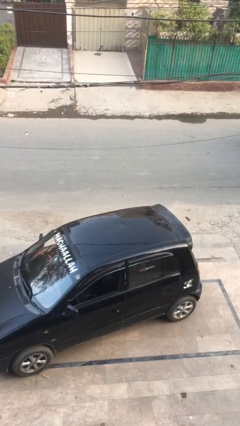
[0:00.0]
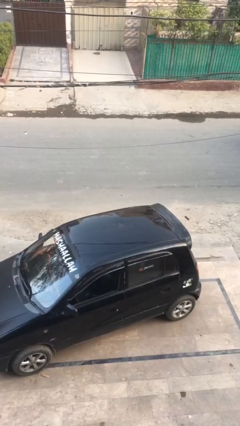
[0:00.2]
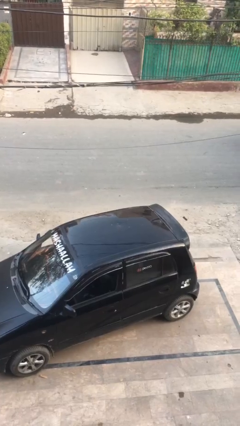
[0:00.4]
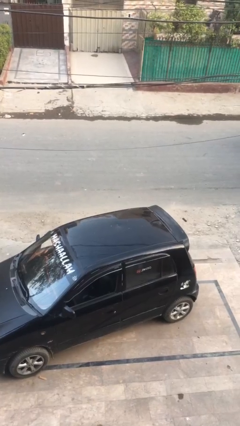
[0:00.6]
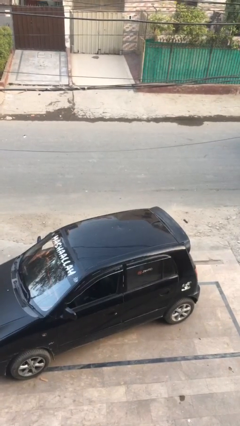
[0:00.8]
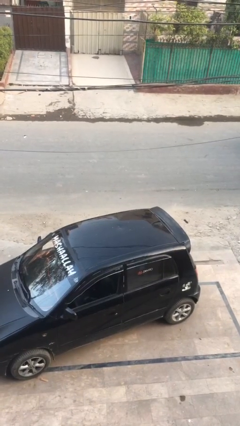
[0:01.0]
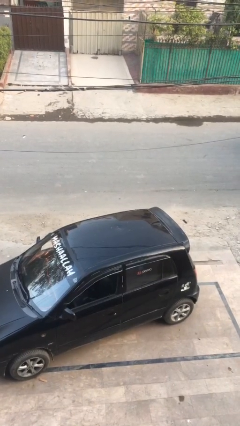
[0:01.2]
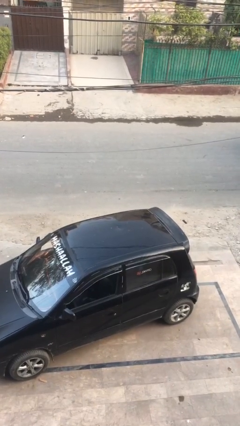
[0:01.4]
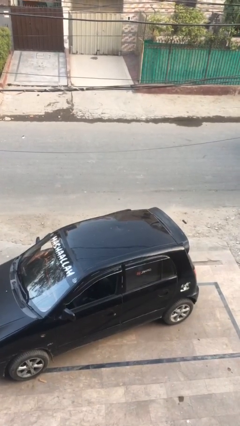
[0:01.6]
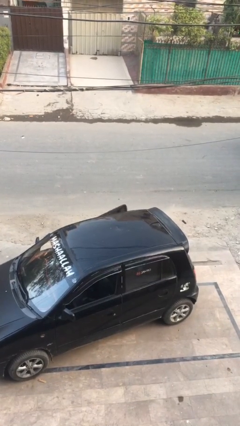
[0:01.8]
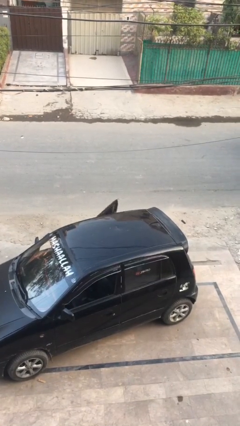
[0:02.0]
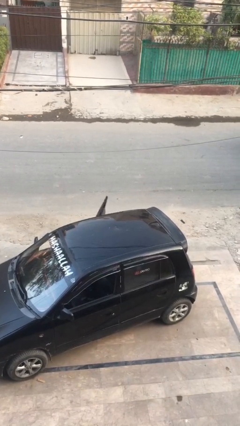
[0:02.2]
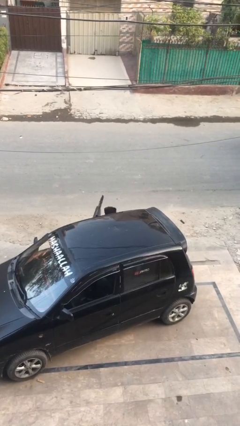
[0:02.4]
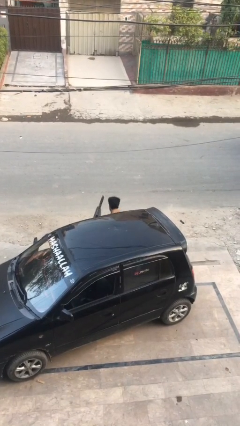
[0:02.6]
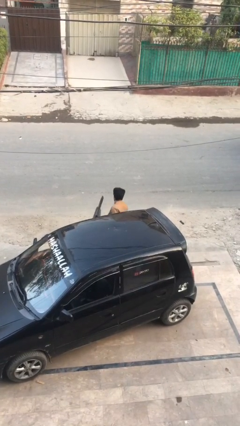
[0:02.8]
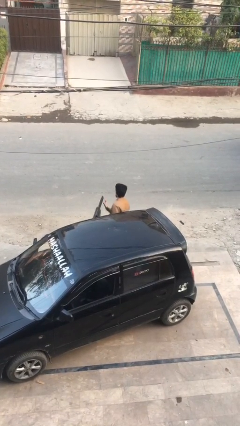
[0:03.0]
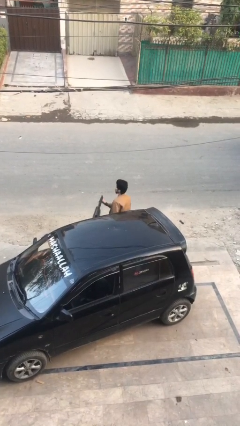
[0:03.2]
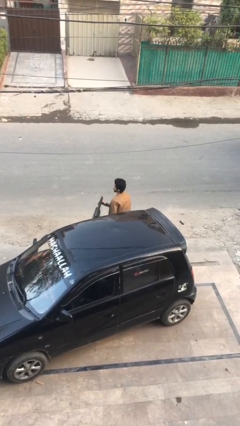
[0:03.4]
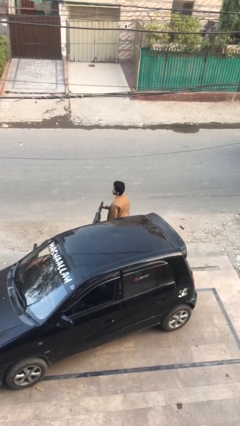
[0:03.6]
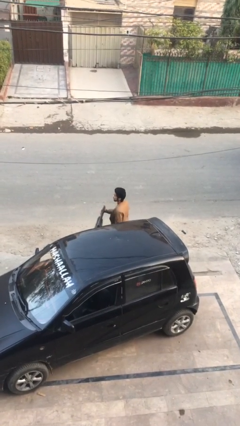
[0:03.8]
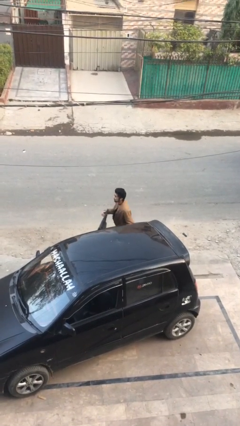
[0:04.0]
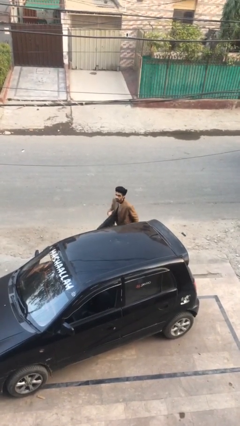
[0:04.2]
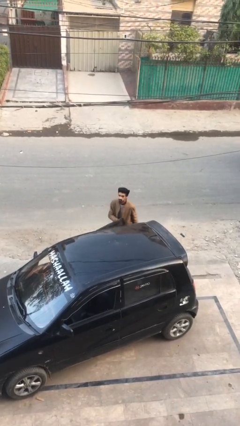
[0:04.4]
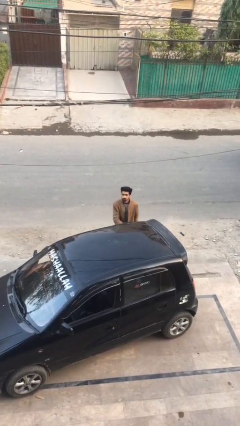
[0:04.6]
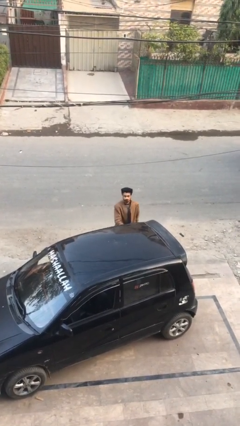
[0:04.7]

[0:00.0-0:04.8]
person exits car

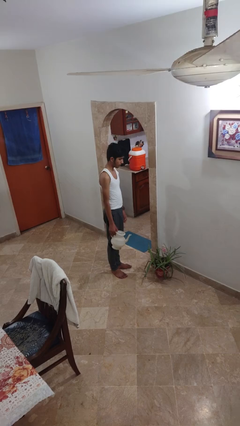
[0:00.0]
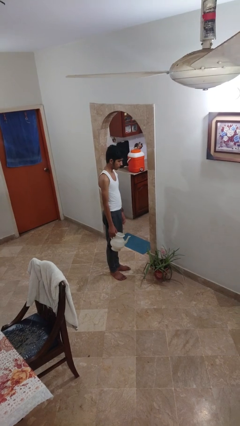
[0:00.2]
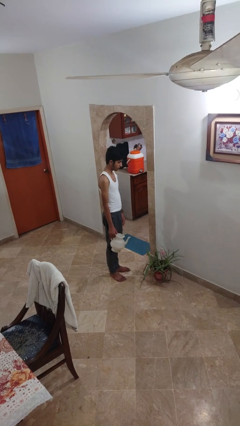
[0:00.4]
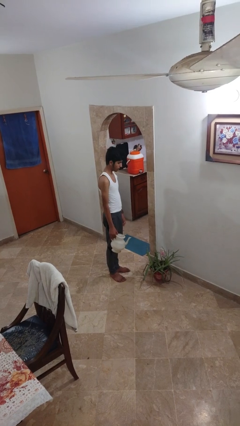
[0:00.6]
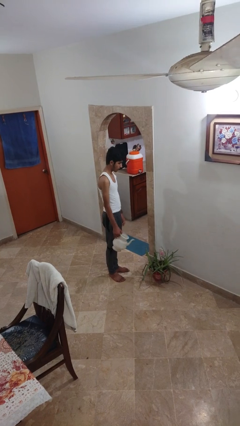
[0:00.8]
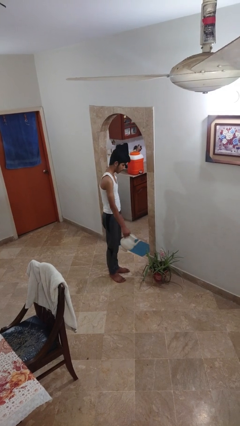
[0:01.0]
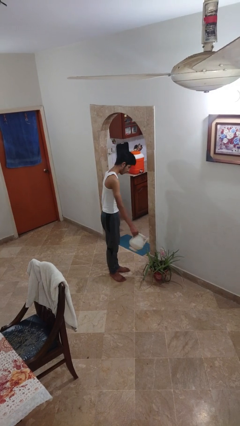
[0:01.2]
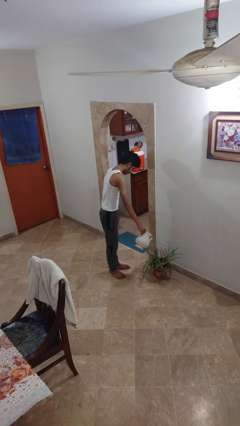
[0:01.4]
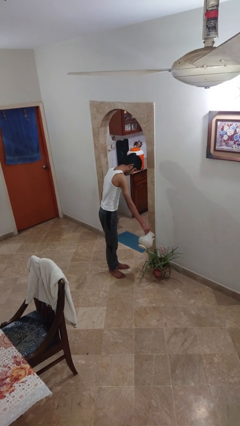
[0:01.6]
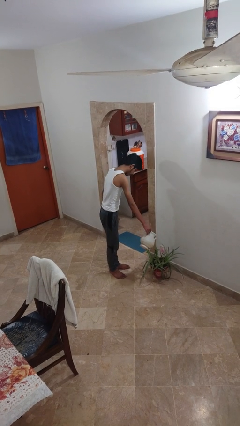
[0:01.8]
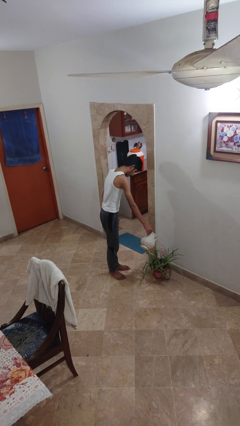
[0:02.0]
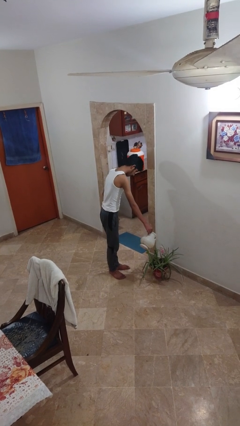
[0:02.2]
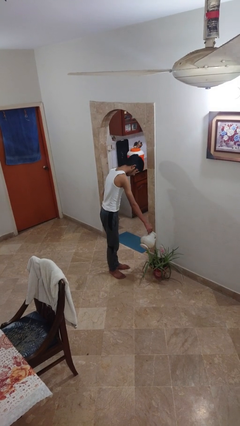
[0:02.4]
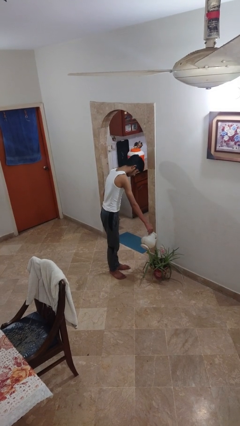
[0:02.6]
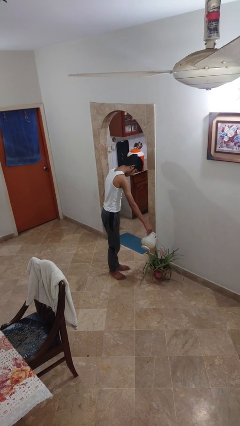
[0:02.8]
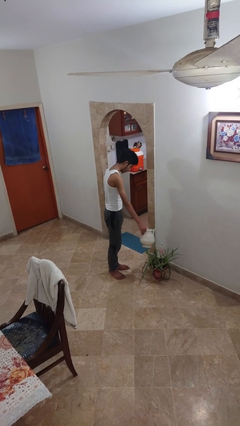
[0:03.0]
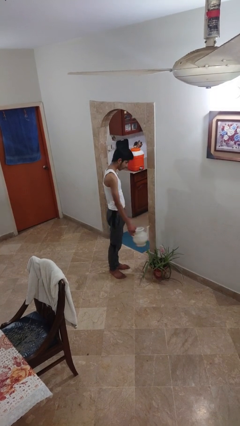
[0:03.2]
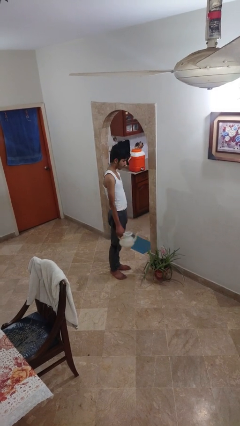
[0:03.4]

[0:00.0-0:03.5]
person waters houseplant

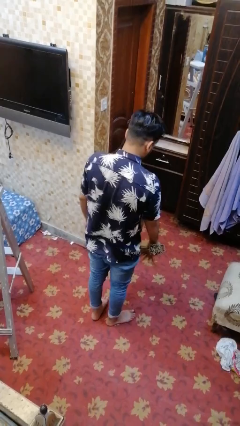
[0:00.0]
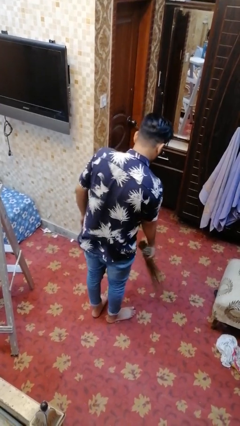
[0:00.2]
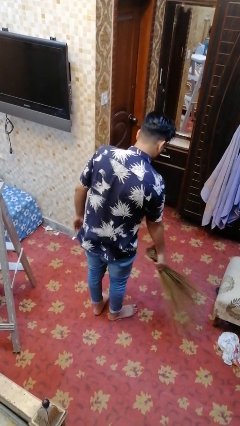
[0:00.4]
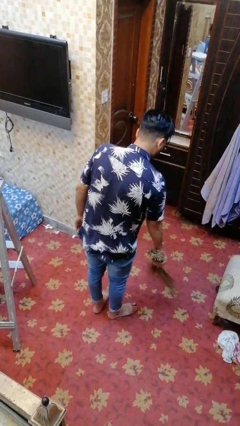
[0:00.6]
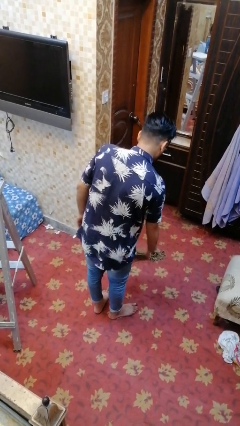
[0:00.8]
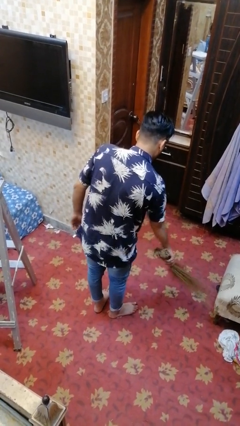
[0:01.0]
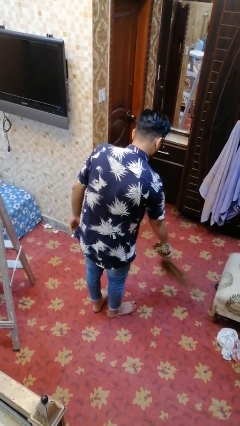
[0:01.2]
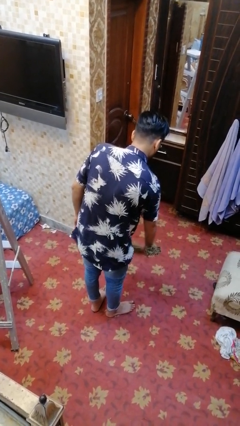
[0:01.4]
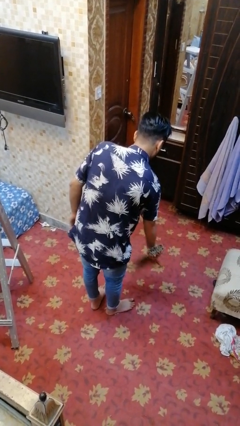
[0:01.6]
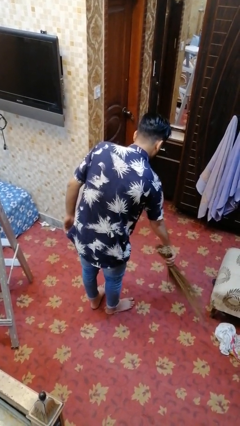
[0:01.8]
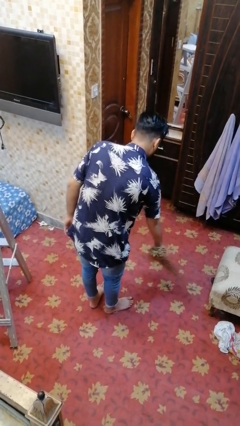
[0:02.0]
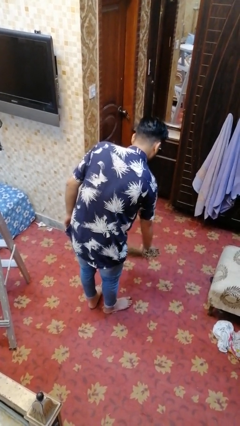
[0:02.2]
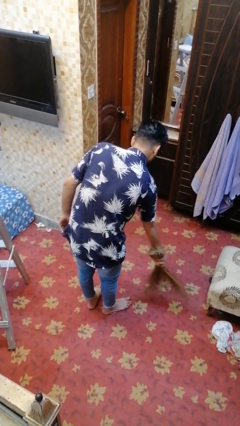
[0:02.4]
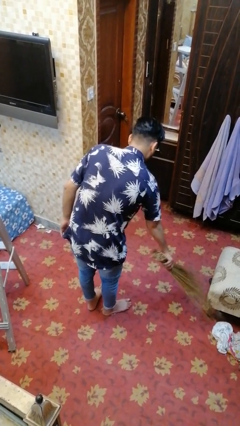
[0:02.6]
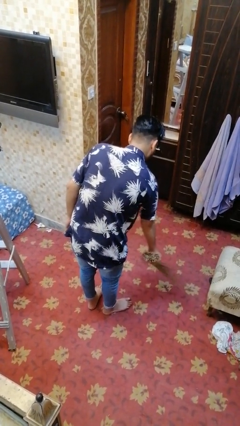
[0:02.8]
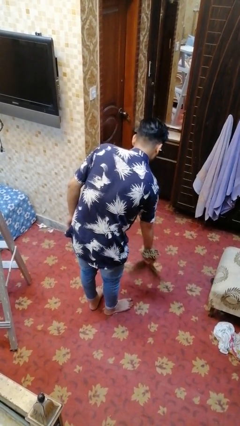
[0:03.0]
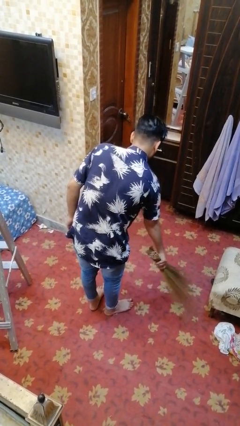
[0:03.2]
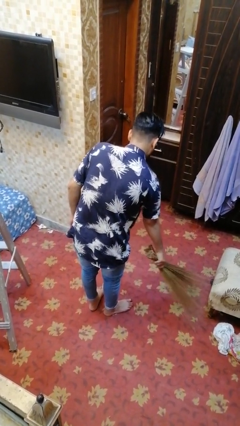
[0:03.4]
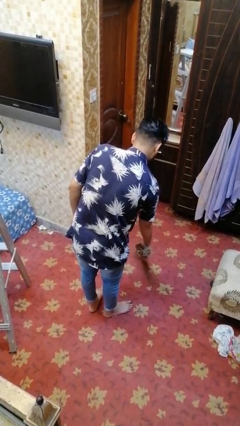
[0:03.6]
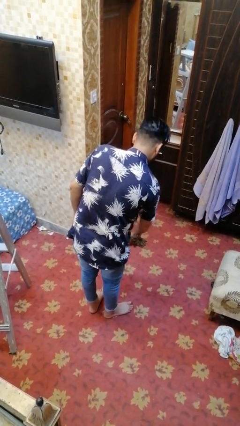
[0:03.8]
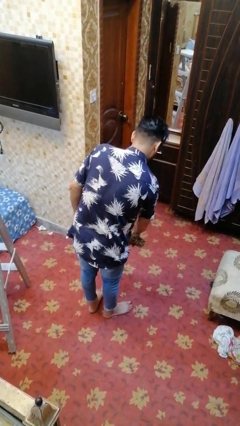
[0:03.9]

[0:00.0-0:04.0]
person sweeps floor

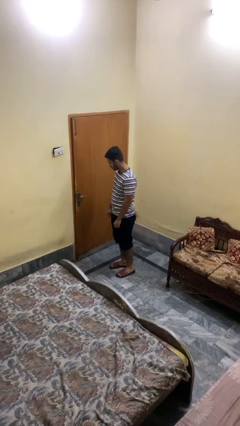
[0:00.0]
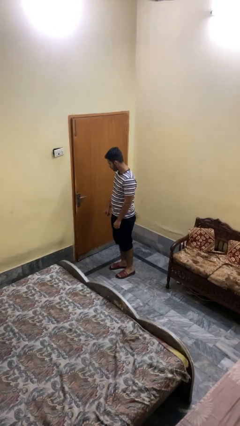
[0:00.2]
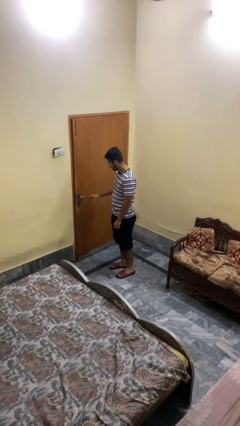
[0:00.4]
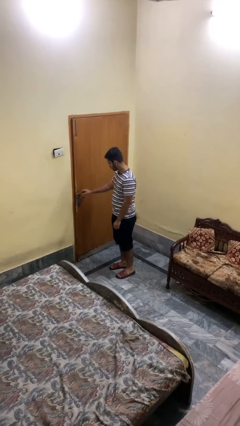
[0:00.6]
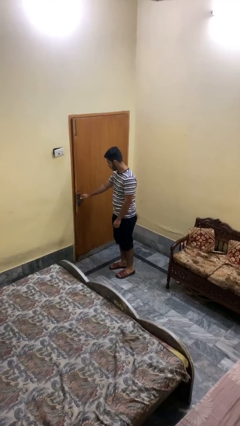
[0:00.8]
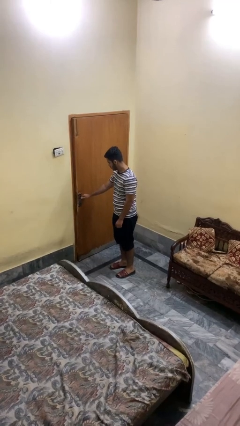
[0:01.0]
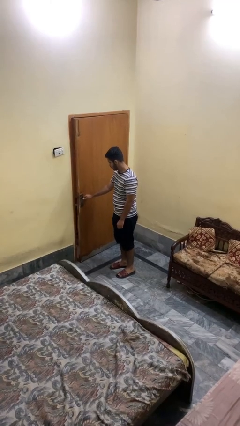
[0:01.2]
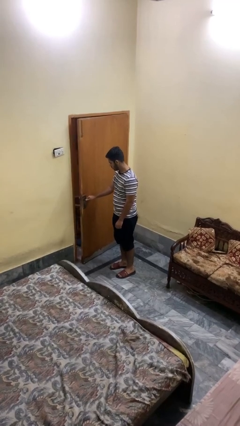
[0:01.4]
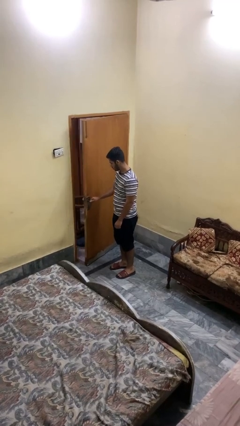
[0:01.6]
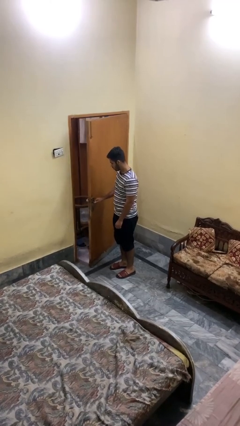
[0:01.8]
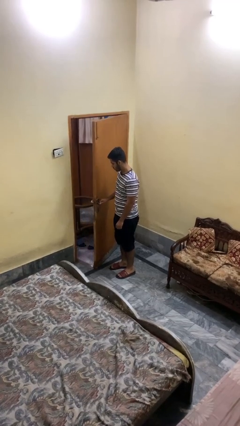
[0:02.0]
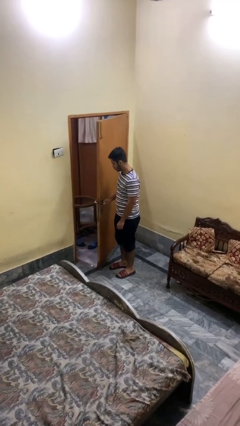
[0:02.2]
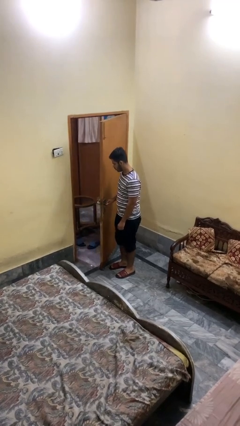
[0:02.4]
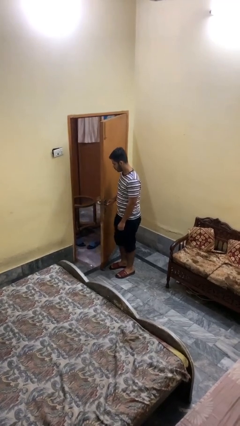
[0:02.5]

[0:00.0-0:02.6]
person opens facility door

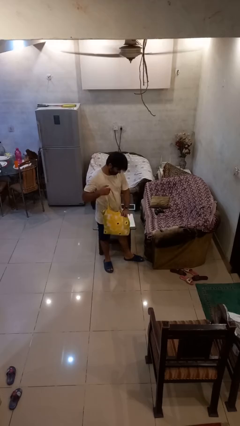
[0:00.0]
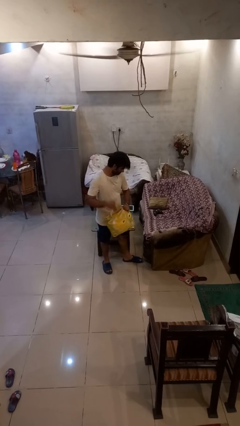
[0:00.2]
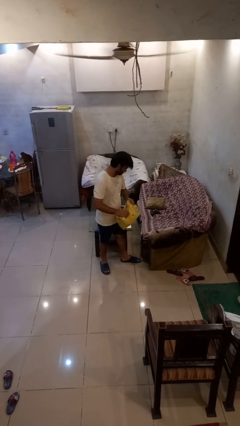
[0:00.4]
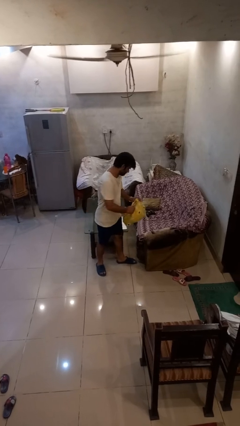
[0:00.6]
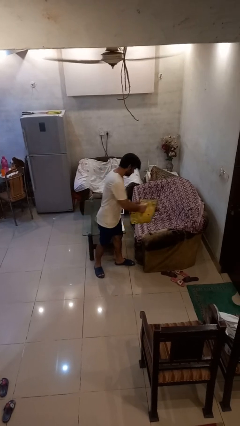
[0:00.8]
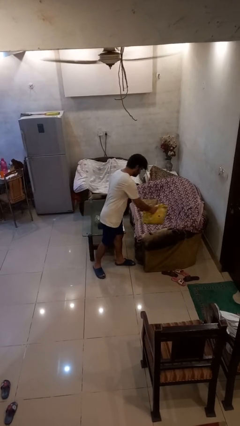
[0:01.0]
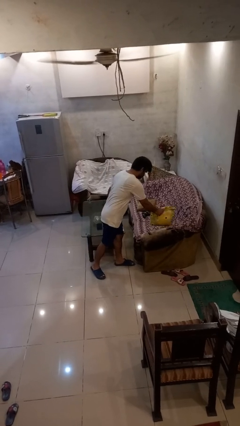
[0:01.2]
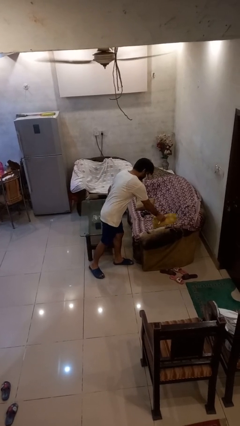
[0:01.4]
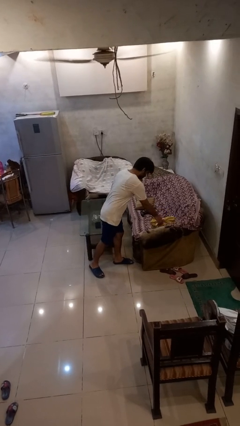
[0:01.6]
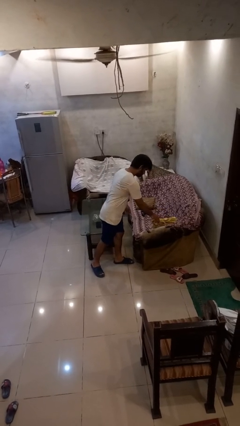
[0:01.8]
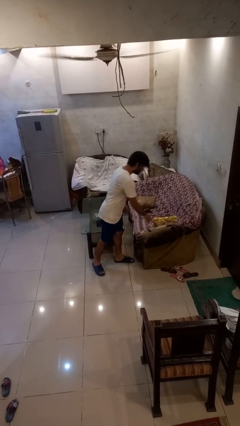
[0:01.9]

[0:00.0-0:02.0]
person puts down object on couch

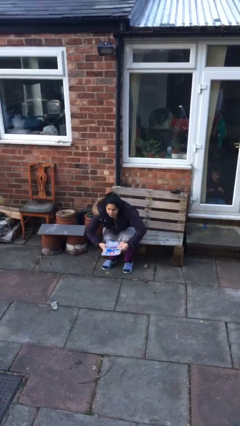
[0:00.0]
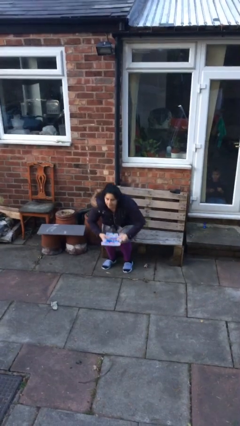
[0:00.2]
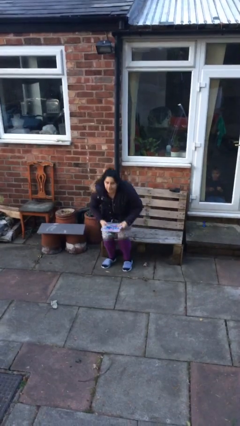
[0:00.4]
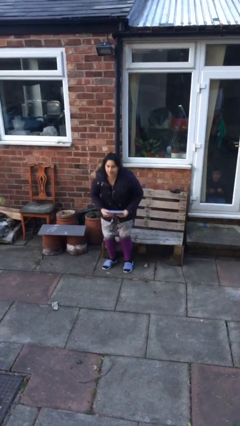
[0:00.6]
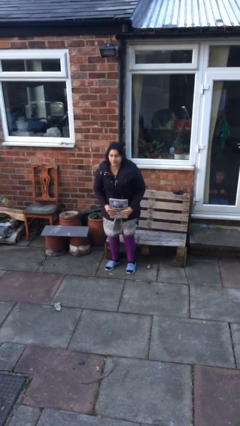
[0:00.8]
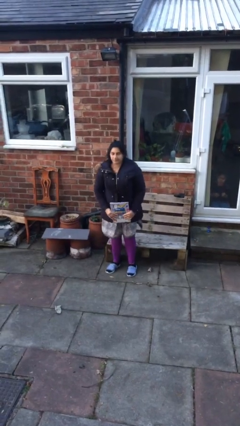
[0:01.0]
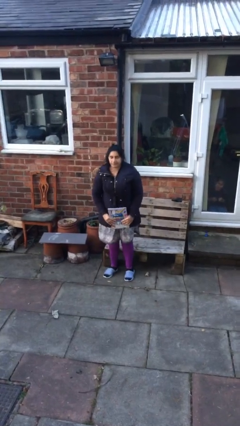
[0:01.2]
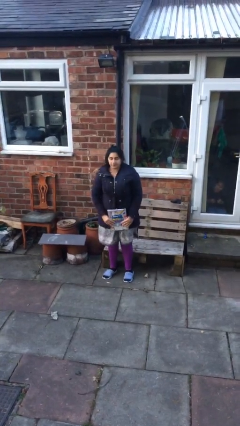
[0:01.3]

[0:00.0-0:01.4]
person stands up
